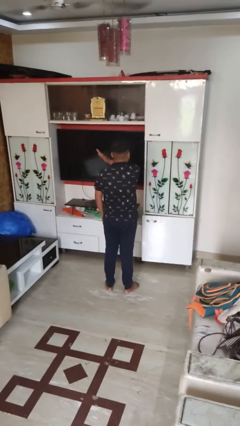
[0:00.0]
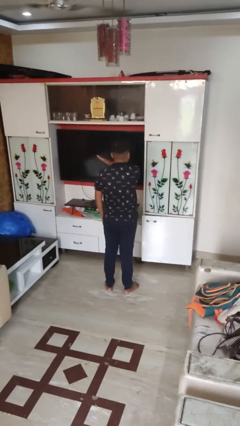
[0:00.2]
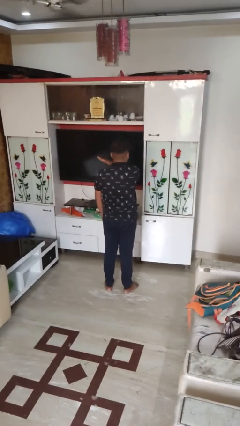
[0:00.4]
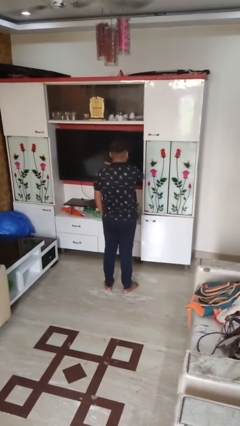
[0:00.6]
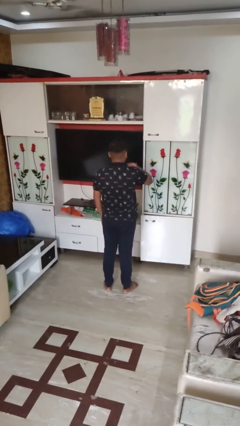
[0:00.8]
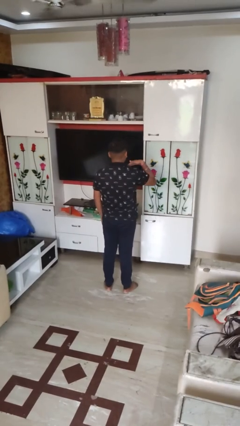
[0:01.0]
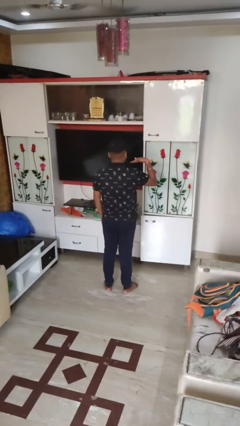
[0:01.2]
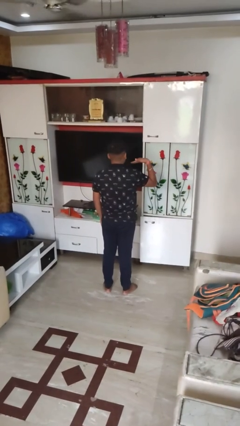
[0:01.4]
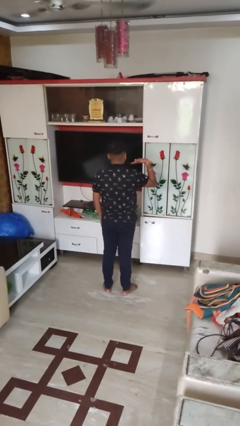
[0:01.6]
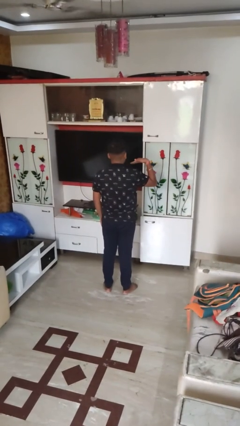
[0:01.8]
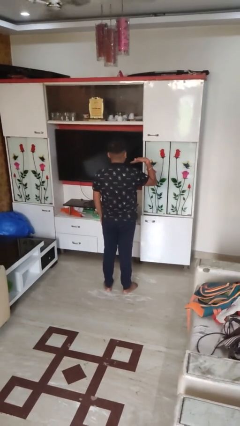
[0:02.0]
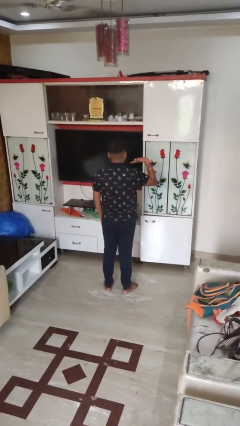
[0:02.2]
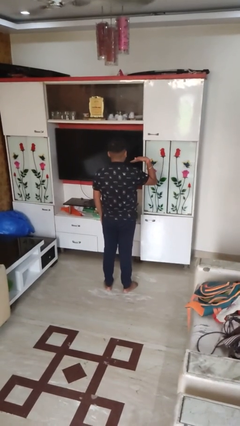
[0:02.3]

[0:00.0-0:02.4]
person gestures cut

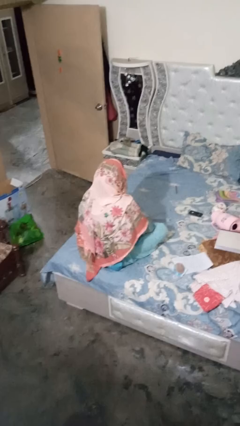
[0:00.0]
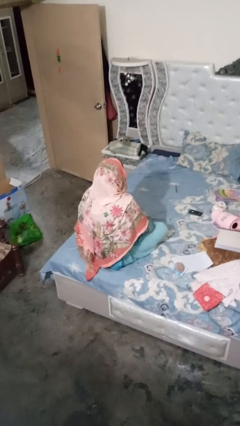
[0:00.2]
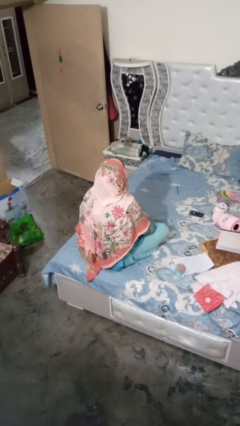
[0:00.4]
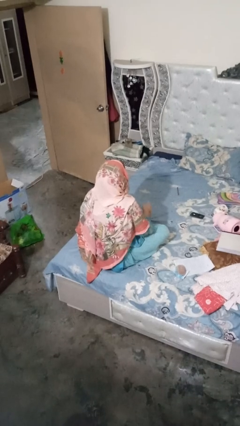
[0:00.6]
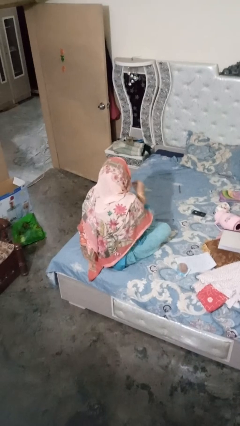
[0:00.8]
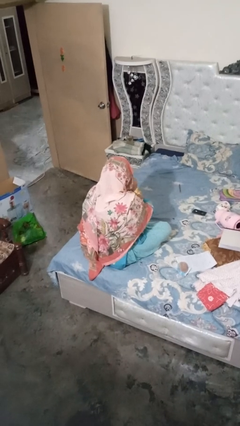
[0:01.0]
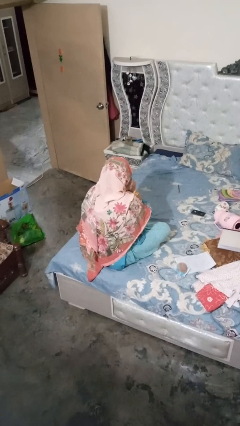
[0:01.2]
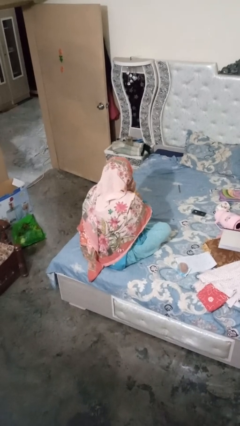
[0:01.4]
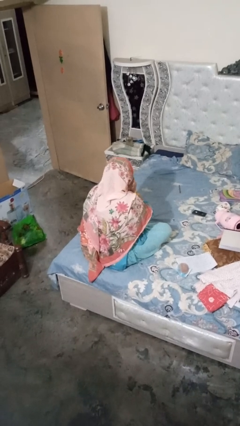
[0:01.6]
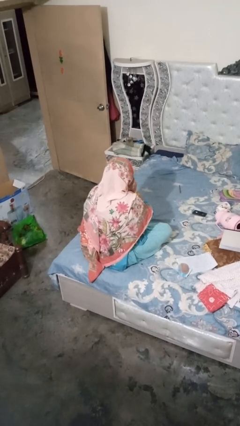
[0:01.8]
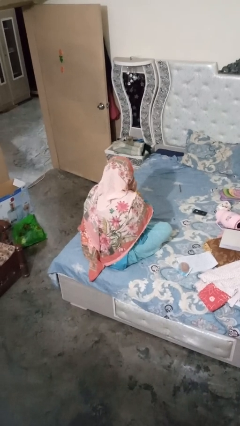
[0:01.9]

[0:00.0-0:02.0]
person gestures listen closely

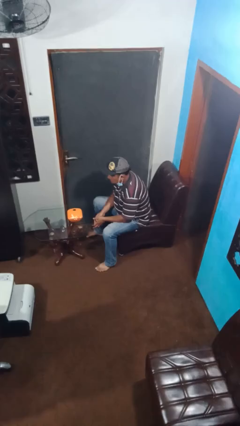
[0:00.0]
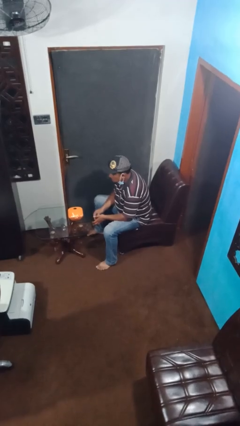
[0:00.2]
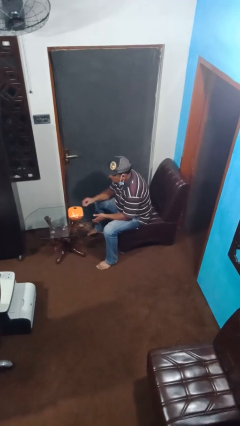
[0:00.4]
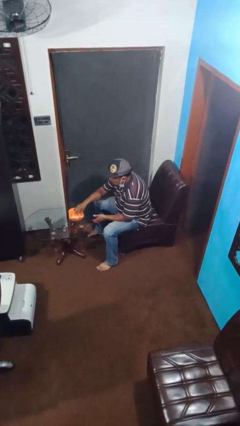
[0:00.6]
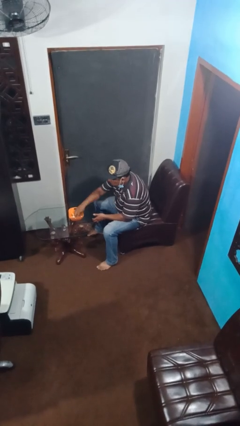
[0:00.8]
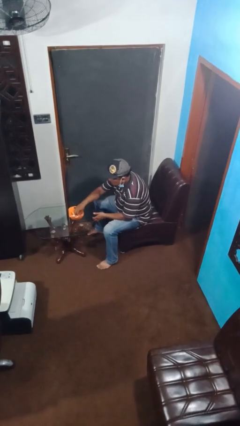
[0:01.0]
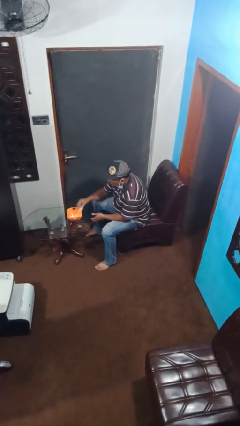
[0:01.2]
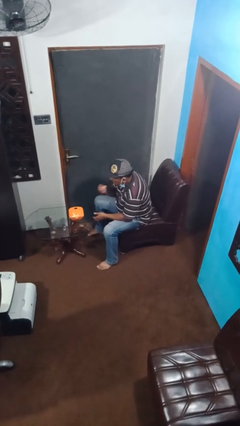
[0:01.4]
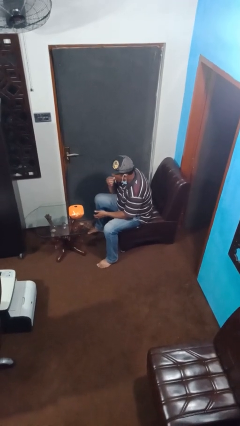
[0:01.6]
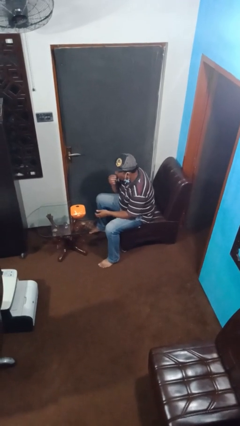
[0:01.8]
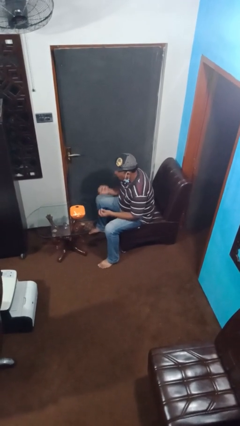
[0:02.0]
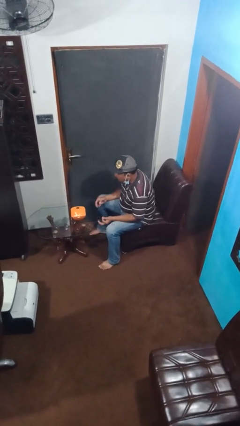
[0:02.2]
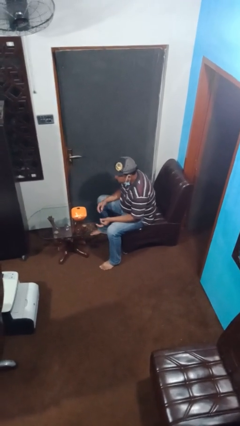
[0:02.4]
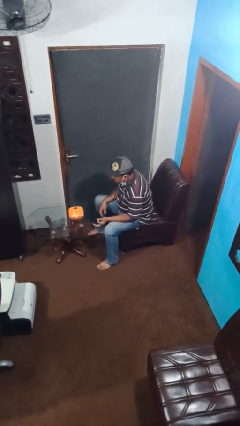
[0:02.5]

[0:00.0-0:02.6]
person eats with hands

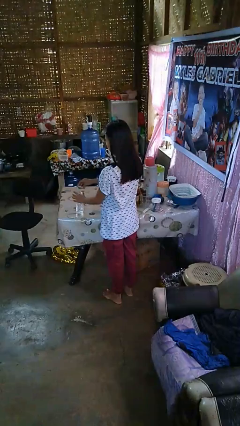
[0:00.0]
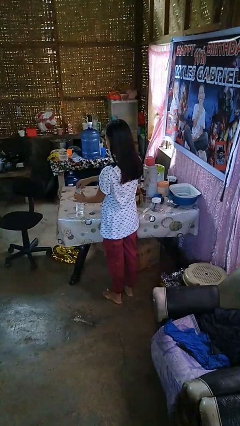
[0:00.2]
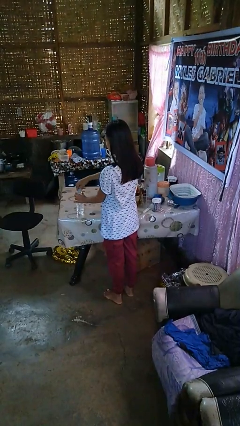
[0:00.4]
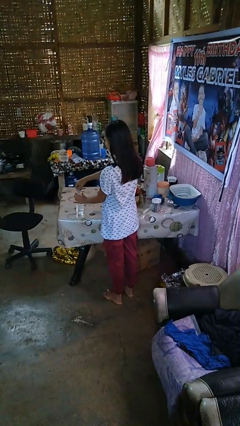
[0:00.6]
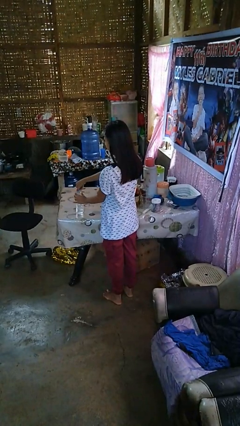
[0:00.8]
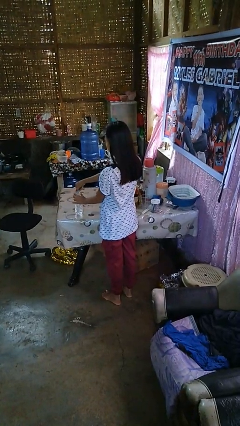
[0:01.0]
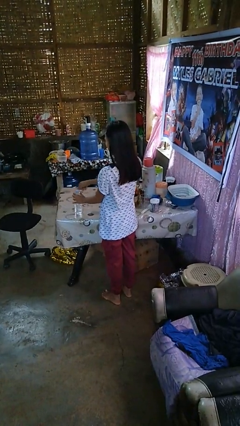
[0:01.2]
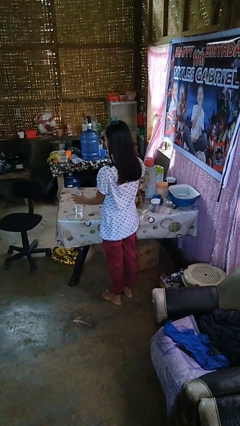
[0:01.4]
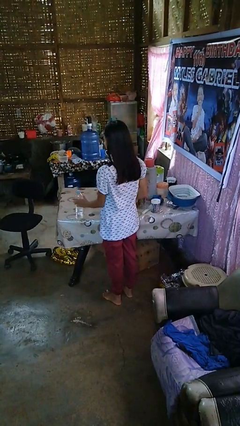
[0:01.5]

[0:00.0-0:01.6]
person screws lid to bottle

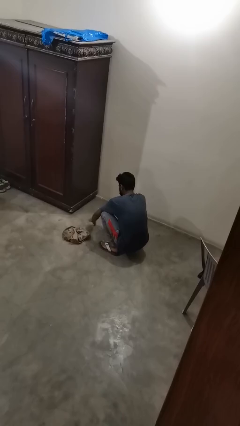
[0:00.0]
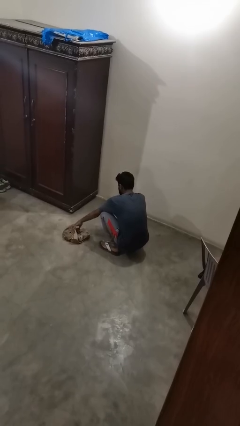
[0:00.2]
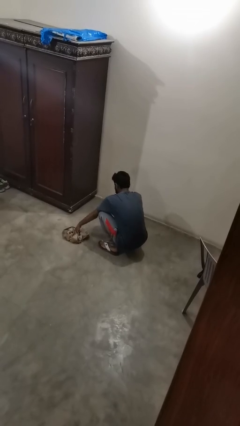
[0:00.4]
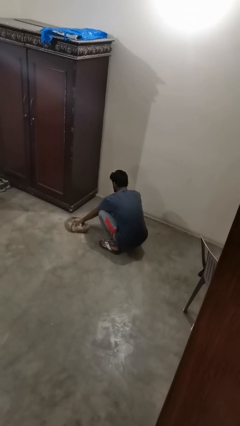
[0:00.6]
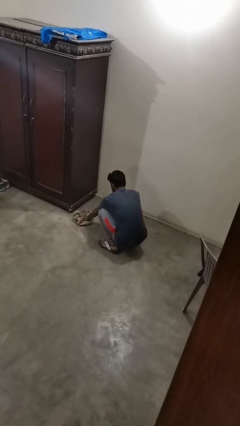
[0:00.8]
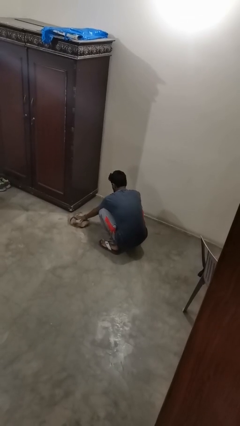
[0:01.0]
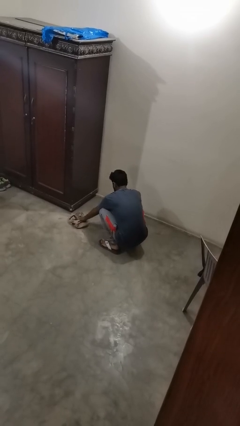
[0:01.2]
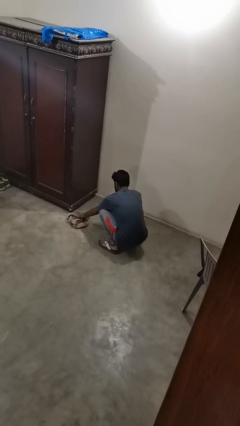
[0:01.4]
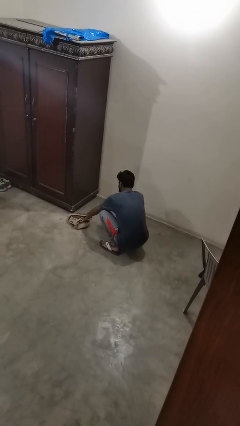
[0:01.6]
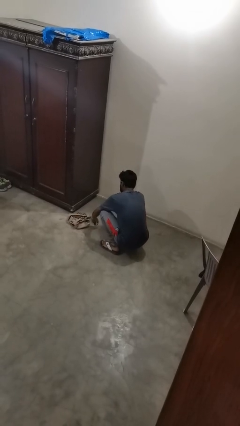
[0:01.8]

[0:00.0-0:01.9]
person mops

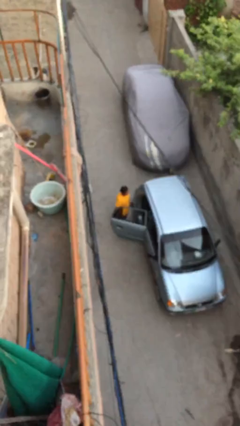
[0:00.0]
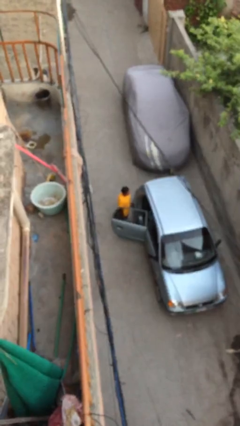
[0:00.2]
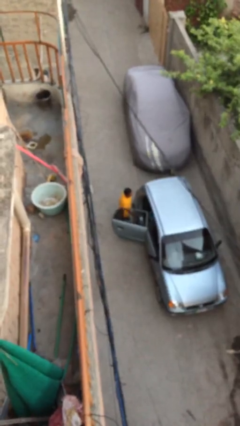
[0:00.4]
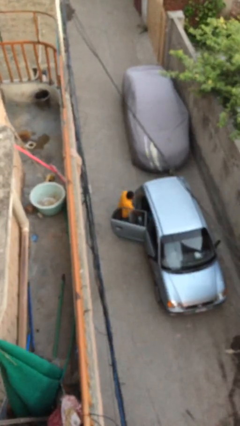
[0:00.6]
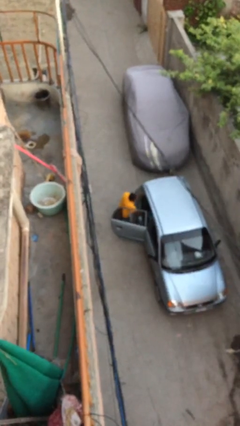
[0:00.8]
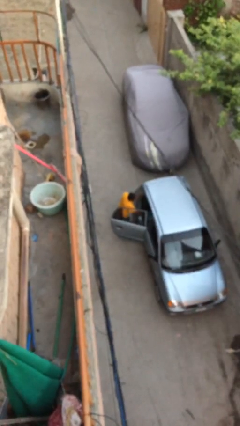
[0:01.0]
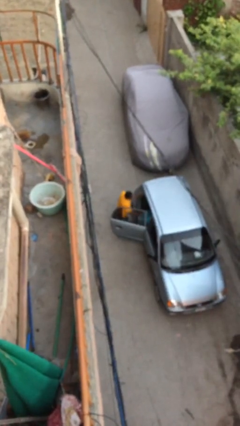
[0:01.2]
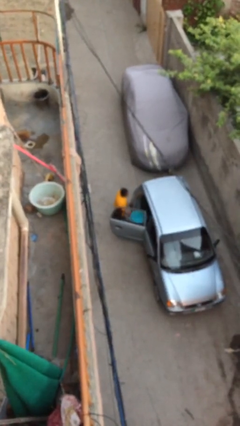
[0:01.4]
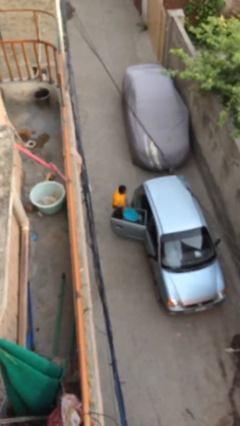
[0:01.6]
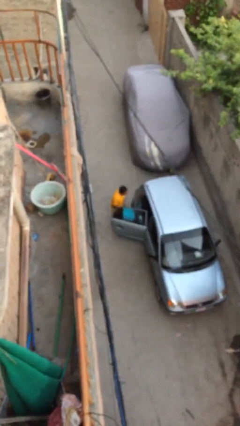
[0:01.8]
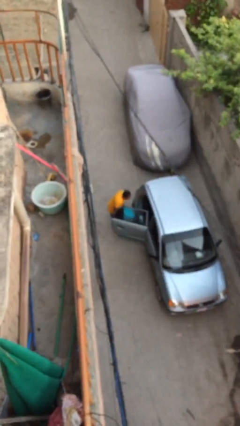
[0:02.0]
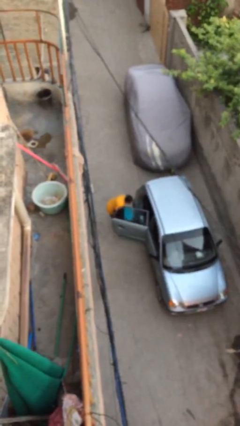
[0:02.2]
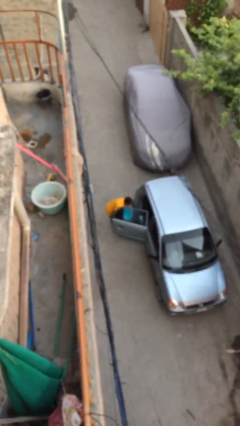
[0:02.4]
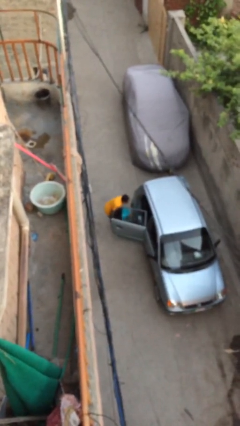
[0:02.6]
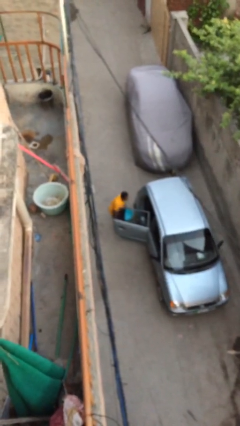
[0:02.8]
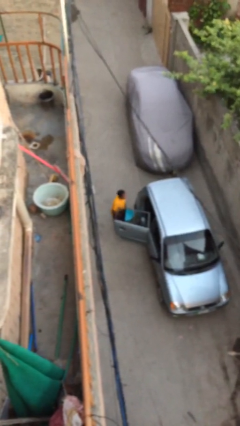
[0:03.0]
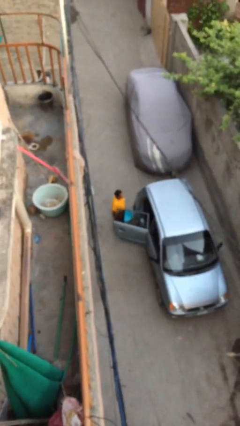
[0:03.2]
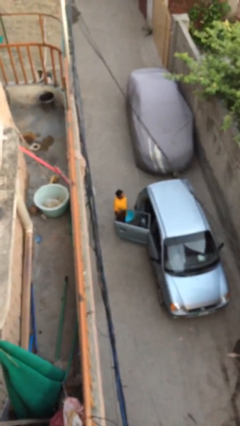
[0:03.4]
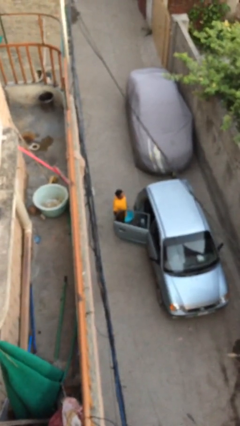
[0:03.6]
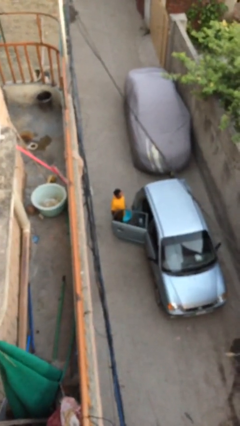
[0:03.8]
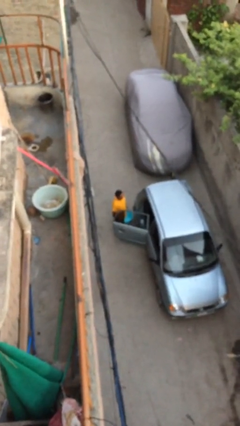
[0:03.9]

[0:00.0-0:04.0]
person unloads car

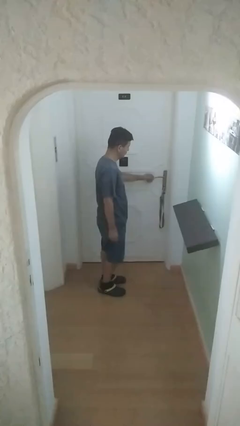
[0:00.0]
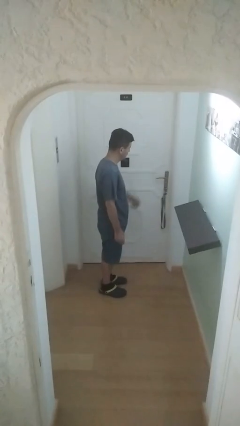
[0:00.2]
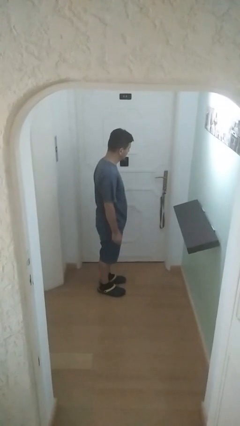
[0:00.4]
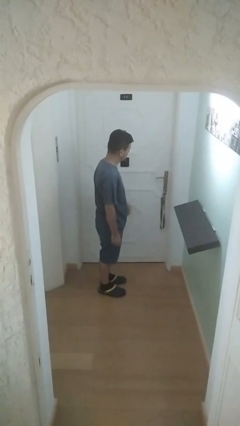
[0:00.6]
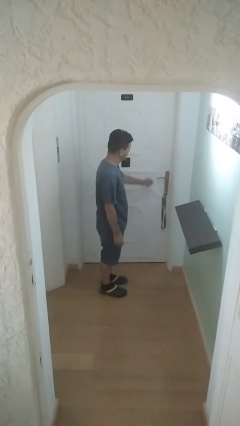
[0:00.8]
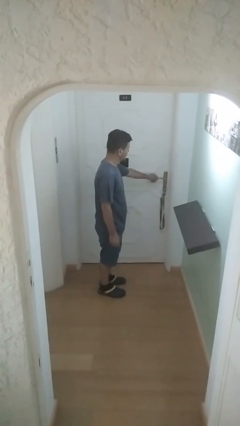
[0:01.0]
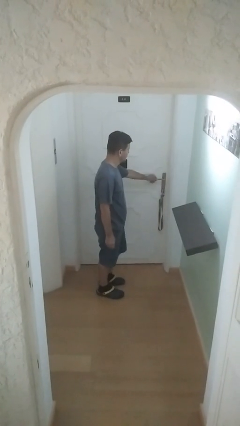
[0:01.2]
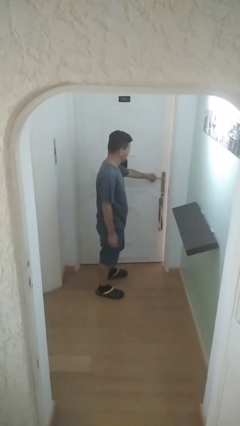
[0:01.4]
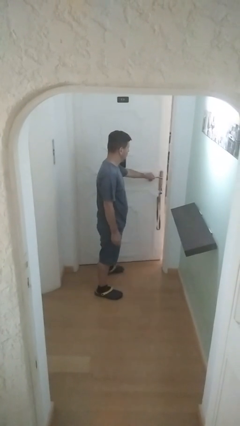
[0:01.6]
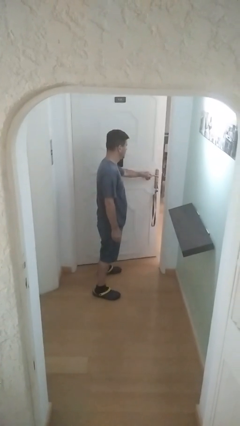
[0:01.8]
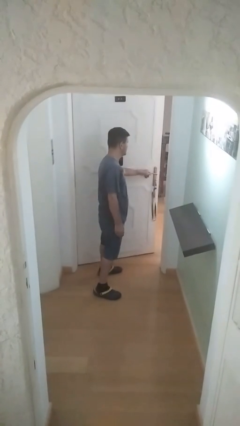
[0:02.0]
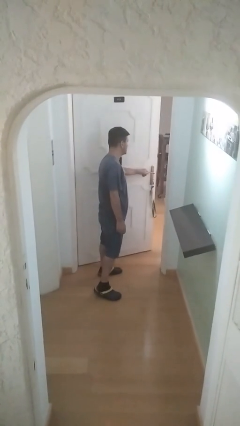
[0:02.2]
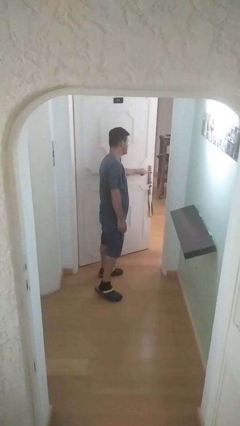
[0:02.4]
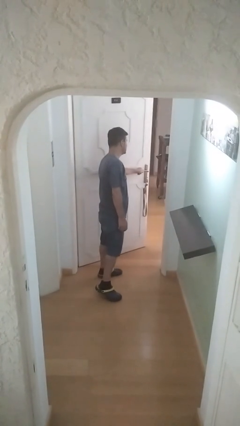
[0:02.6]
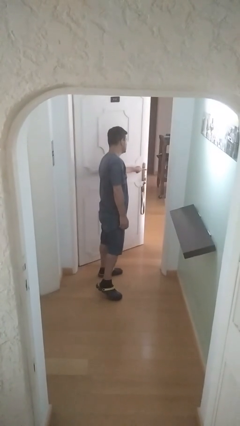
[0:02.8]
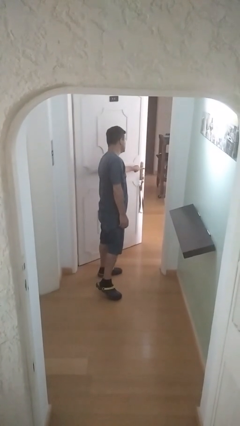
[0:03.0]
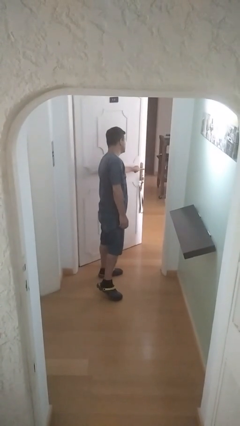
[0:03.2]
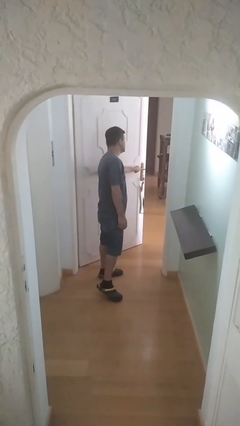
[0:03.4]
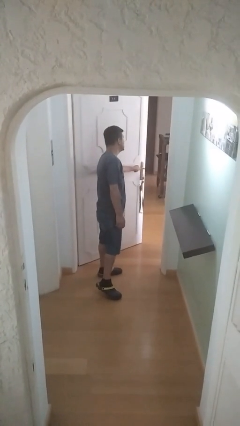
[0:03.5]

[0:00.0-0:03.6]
person opens facility door
